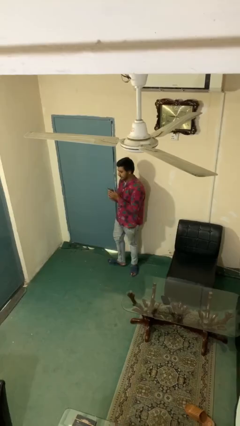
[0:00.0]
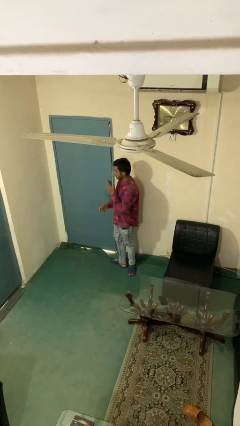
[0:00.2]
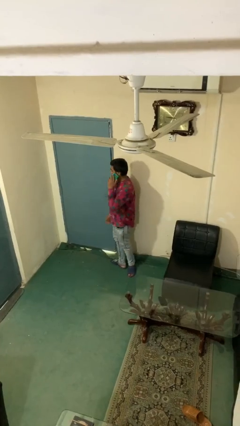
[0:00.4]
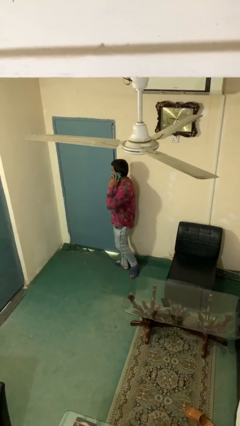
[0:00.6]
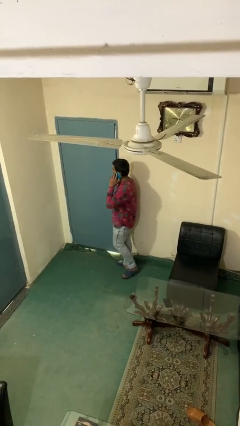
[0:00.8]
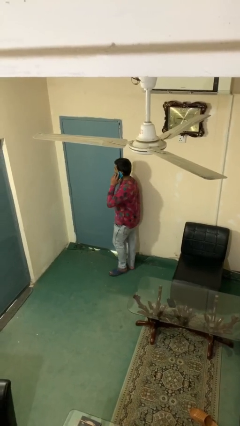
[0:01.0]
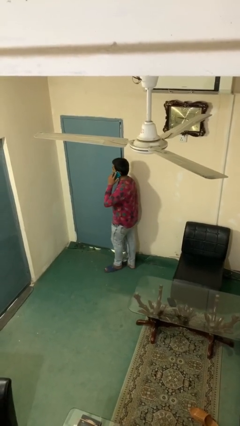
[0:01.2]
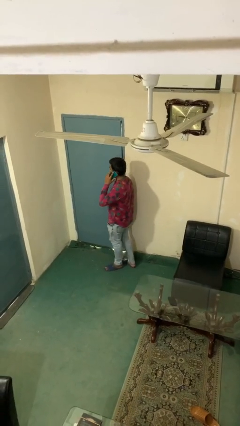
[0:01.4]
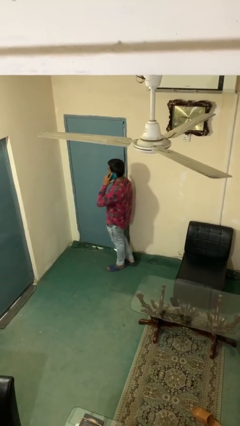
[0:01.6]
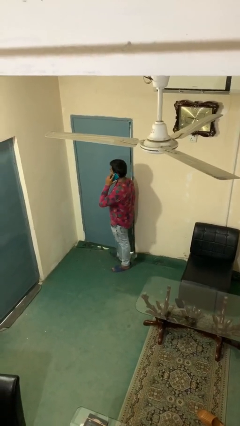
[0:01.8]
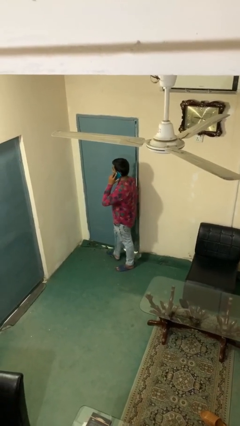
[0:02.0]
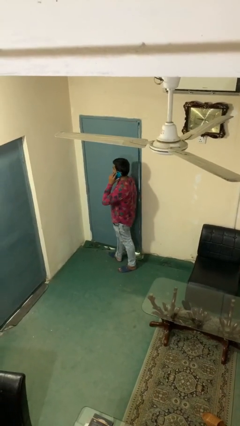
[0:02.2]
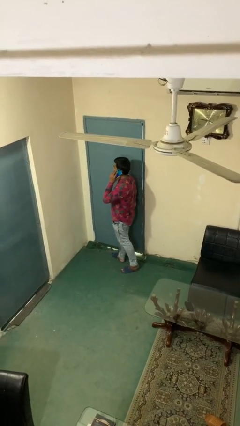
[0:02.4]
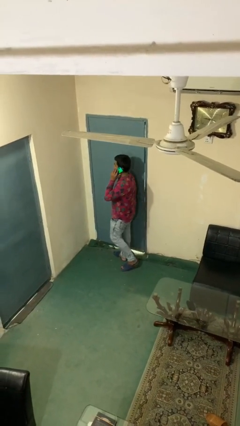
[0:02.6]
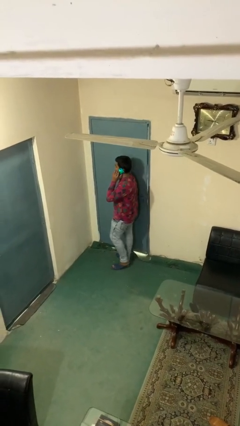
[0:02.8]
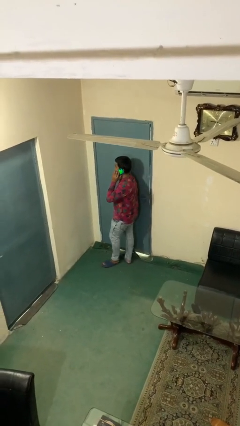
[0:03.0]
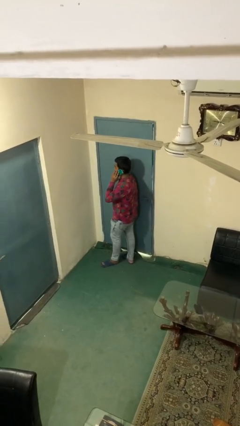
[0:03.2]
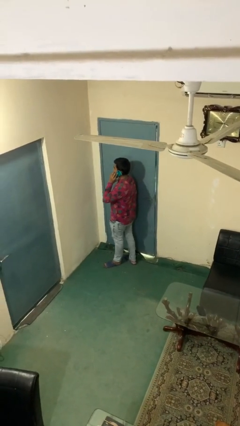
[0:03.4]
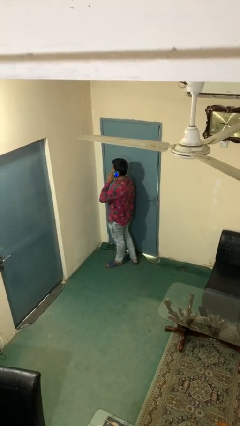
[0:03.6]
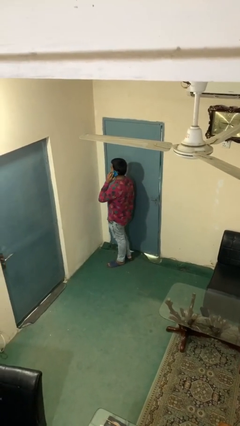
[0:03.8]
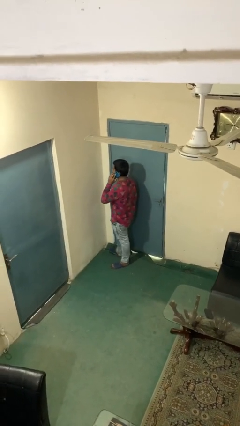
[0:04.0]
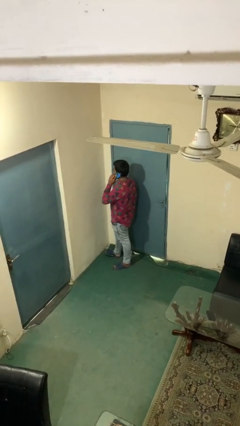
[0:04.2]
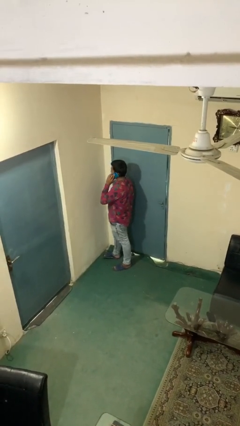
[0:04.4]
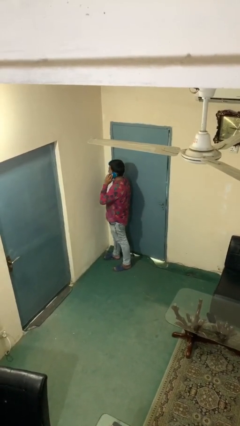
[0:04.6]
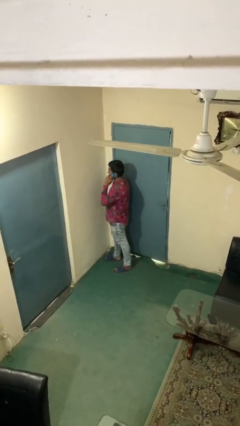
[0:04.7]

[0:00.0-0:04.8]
person talks on phone

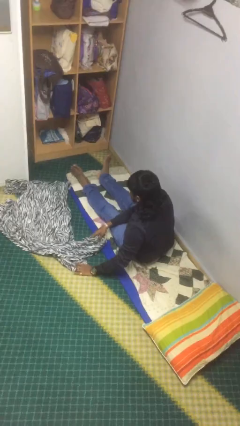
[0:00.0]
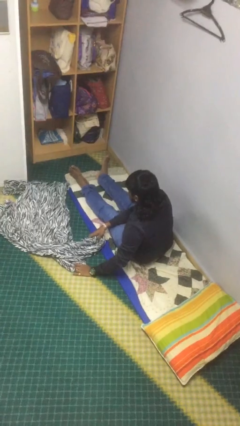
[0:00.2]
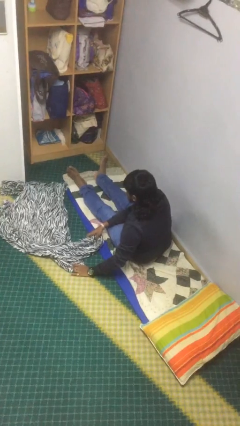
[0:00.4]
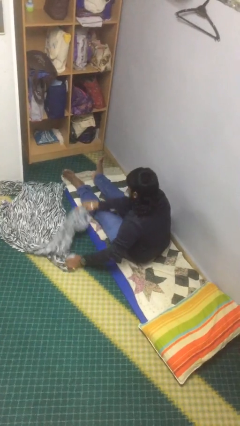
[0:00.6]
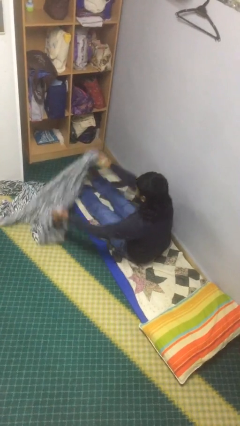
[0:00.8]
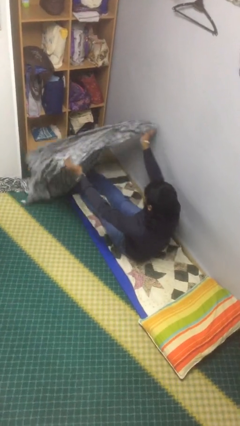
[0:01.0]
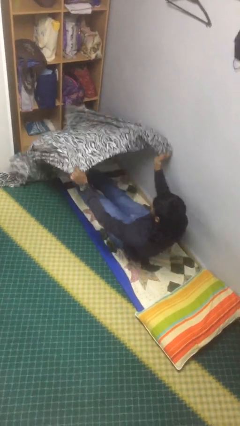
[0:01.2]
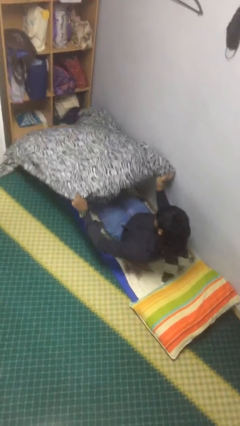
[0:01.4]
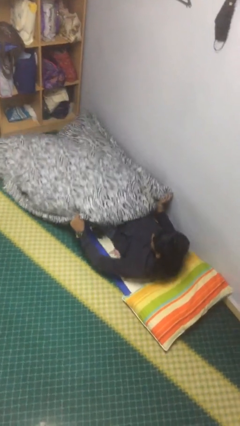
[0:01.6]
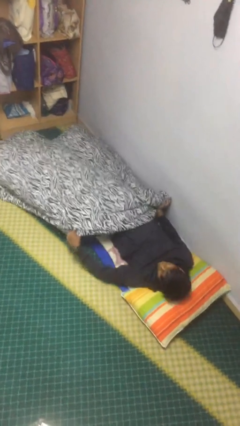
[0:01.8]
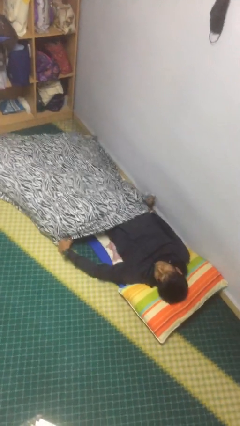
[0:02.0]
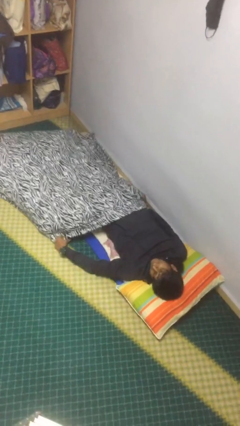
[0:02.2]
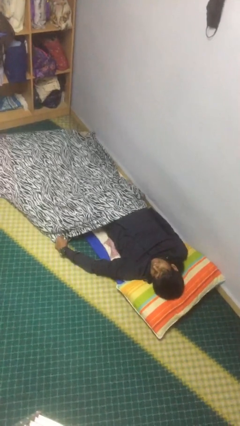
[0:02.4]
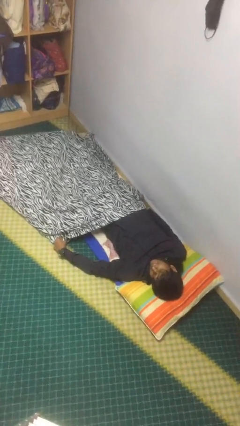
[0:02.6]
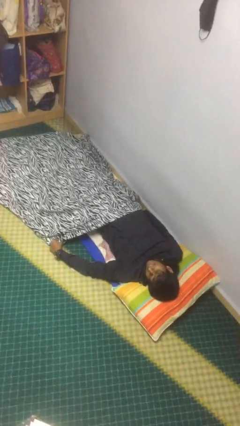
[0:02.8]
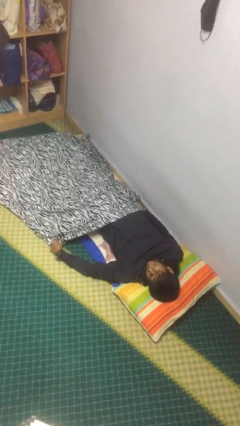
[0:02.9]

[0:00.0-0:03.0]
person covers with blanket

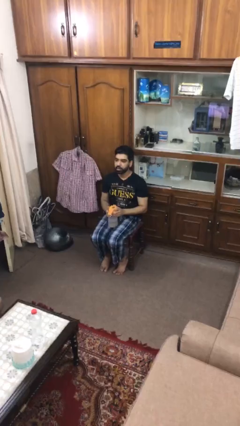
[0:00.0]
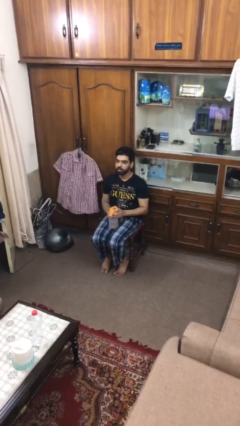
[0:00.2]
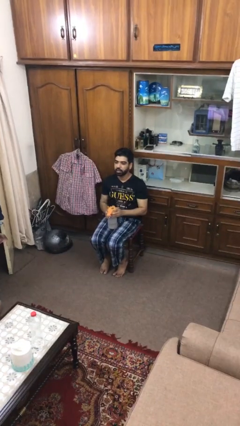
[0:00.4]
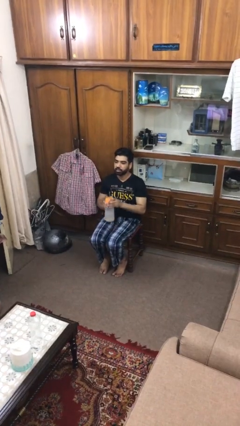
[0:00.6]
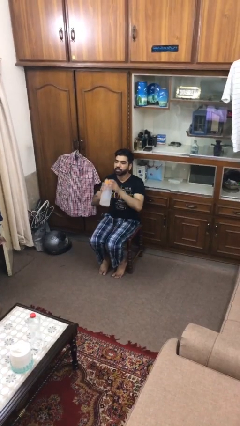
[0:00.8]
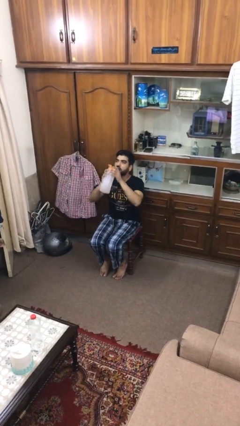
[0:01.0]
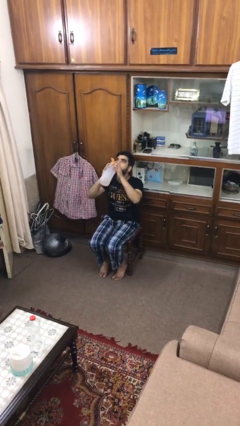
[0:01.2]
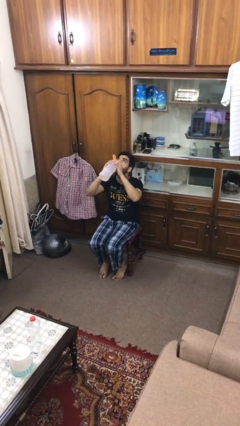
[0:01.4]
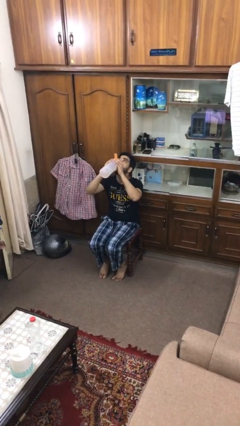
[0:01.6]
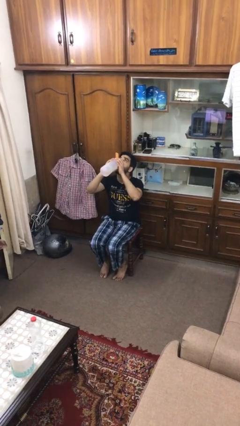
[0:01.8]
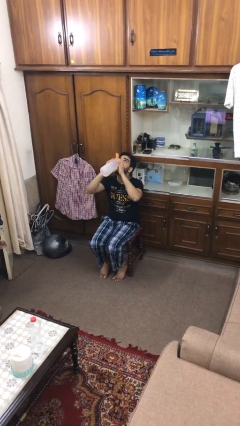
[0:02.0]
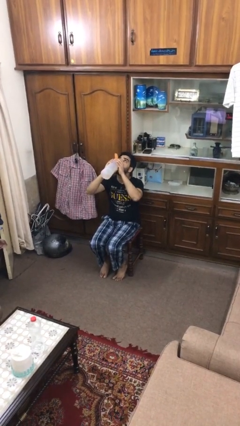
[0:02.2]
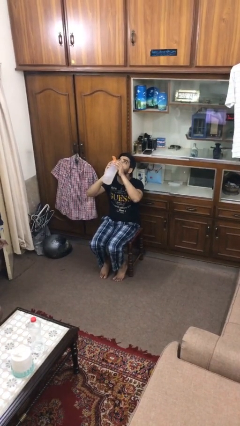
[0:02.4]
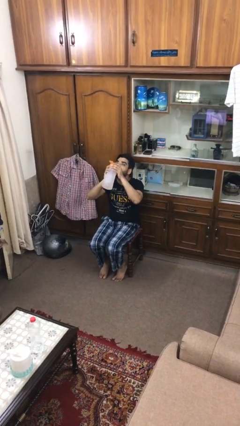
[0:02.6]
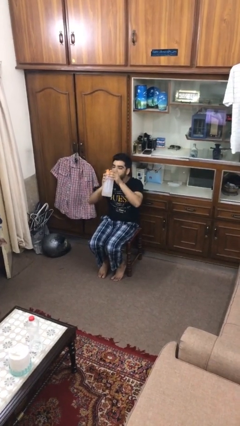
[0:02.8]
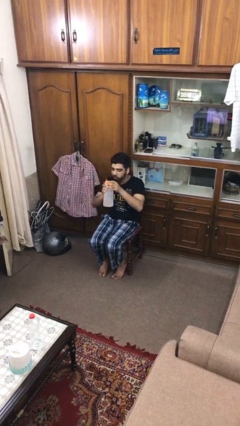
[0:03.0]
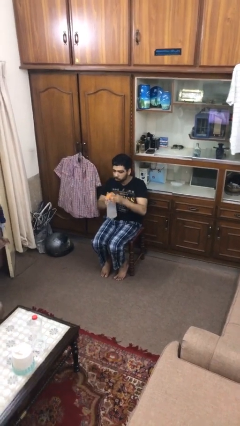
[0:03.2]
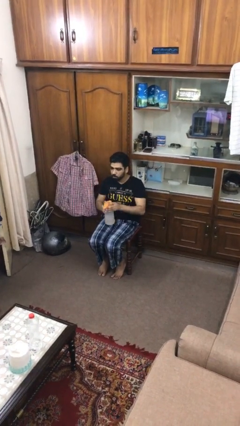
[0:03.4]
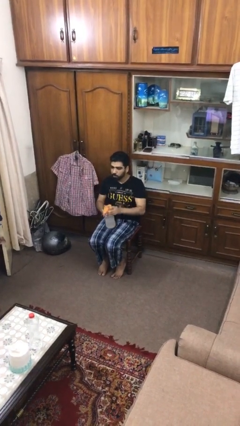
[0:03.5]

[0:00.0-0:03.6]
person drinks from bottle

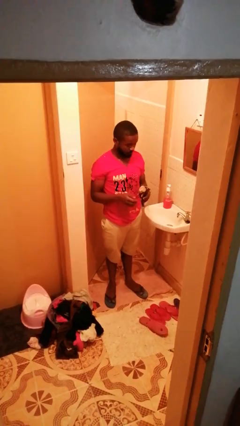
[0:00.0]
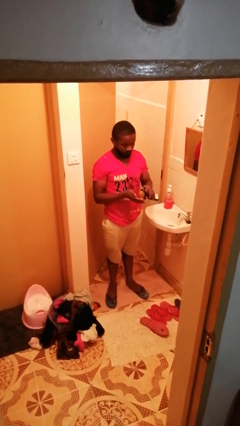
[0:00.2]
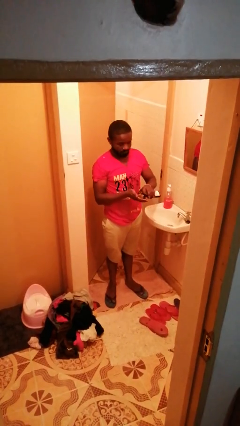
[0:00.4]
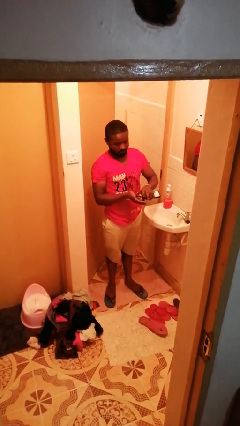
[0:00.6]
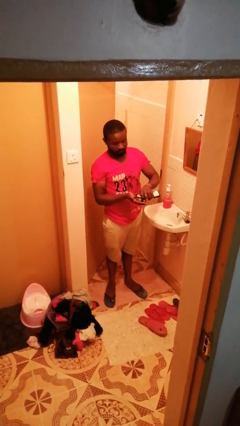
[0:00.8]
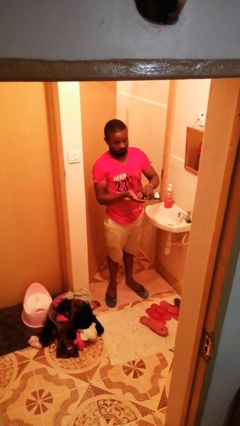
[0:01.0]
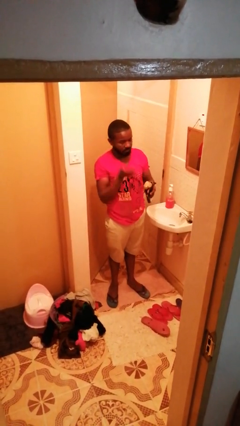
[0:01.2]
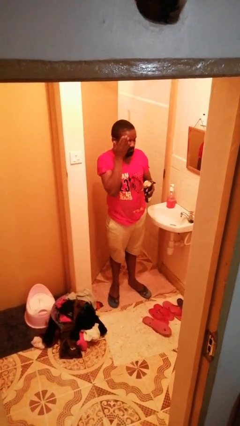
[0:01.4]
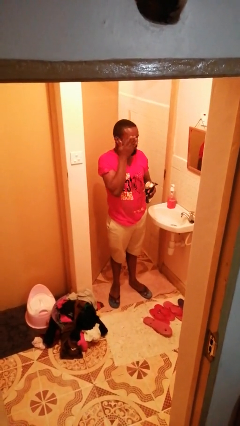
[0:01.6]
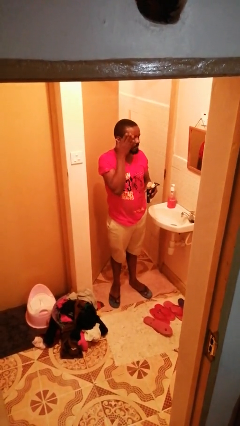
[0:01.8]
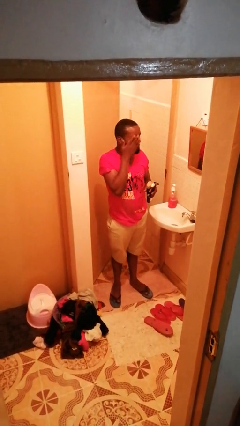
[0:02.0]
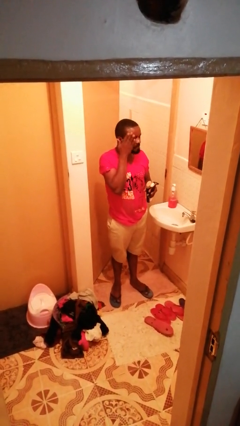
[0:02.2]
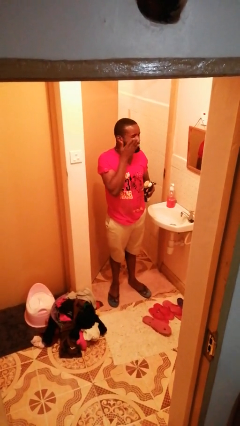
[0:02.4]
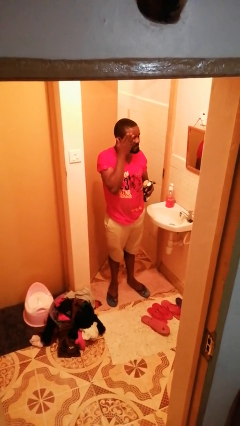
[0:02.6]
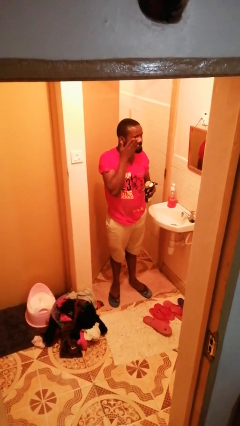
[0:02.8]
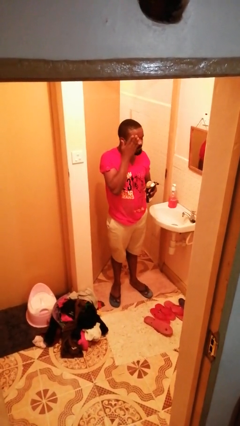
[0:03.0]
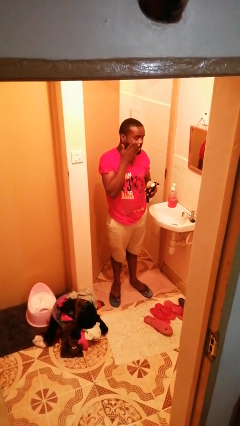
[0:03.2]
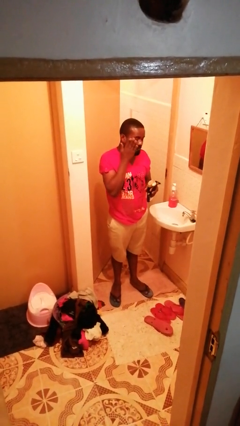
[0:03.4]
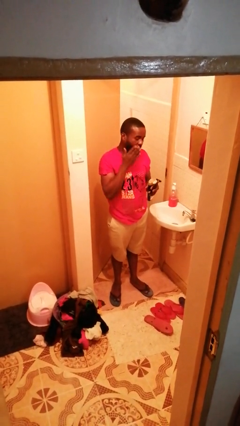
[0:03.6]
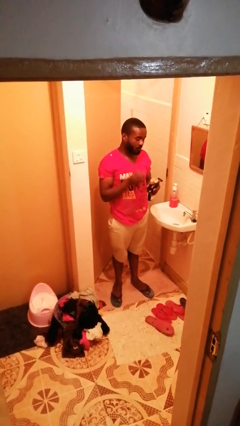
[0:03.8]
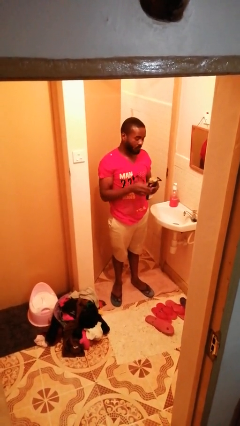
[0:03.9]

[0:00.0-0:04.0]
person applies shaving cream

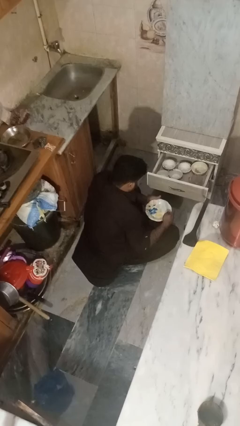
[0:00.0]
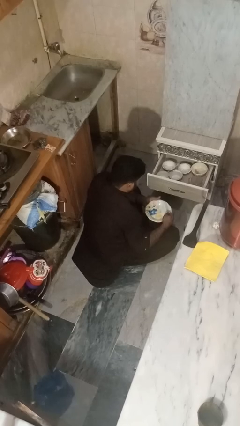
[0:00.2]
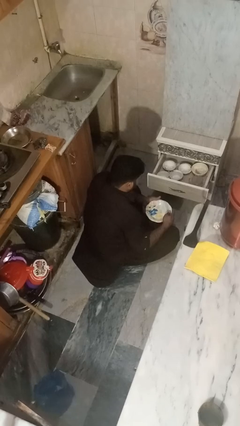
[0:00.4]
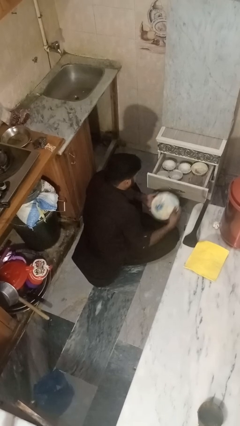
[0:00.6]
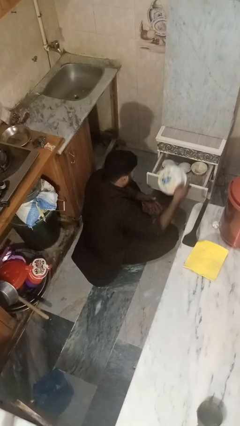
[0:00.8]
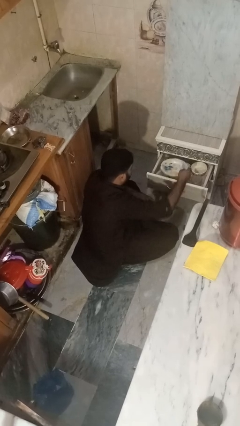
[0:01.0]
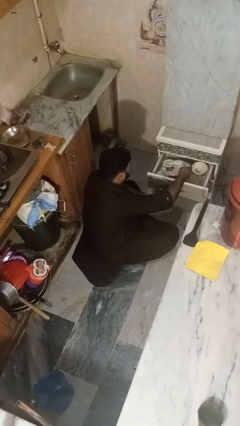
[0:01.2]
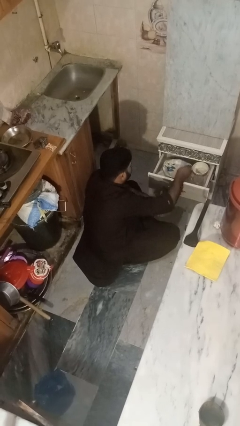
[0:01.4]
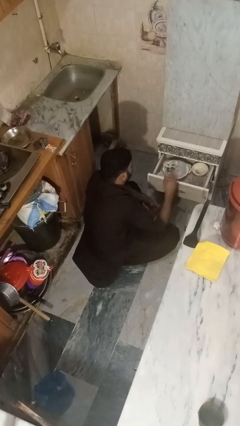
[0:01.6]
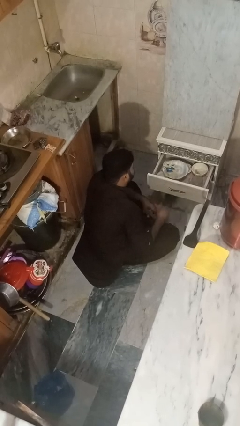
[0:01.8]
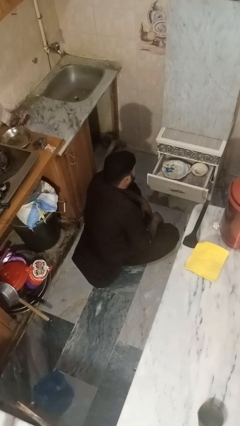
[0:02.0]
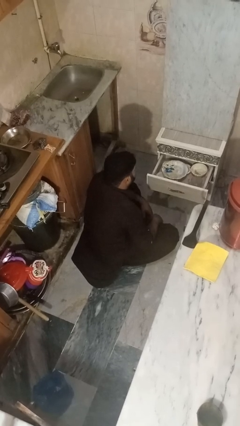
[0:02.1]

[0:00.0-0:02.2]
person puts object into kitchen drawer
